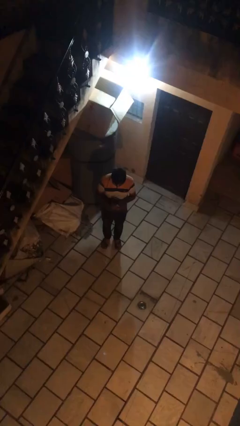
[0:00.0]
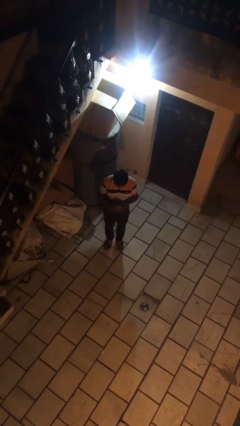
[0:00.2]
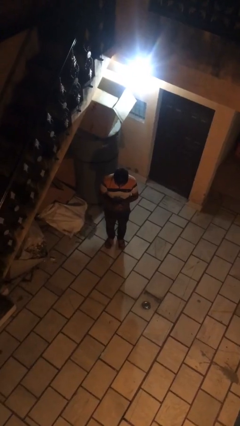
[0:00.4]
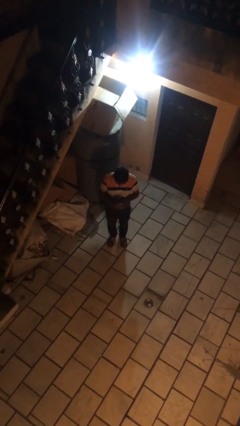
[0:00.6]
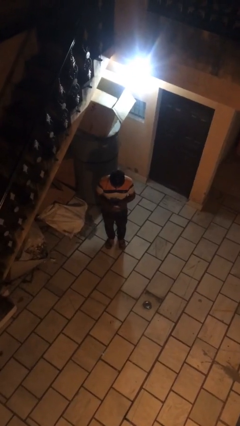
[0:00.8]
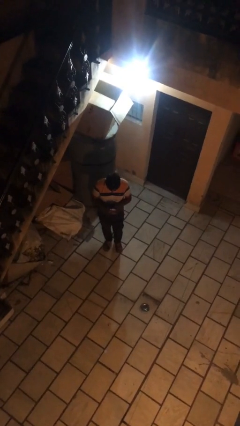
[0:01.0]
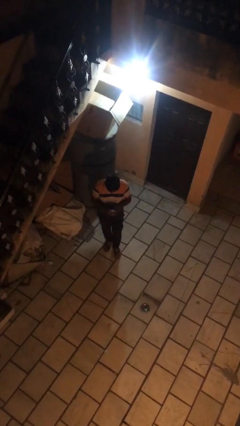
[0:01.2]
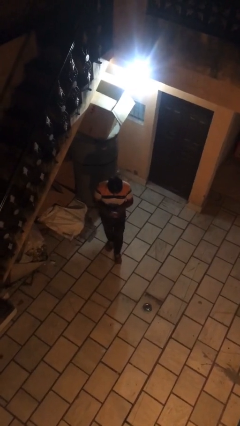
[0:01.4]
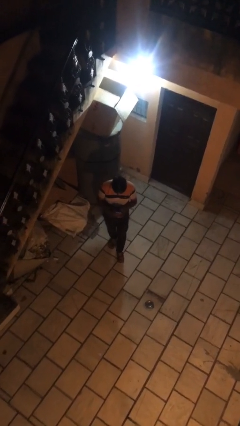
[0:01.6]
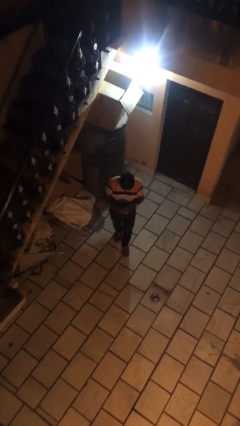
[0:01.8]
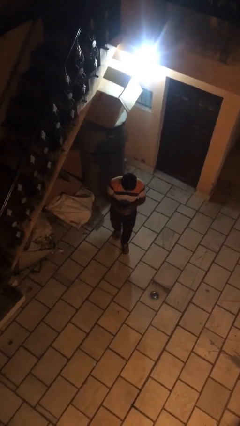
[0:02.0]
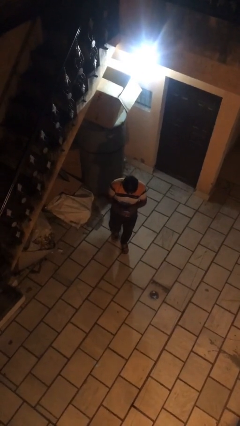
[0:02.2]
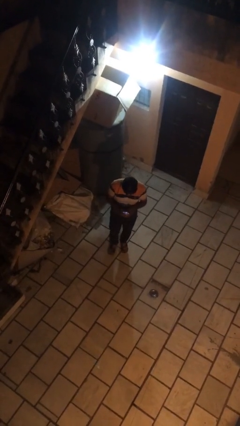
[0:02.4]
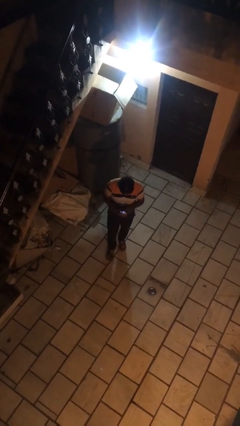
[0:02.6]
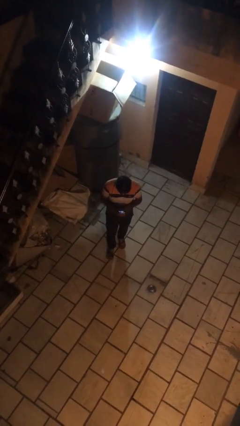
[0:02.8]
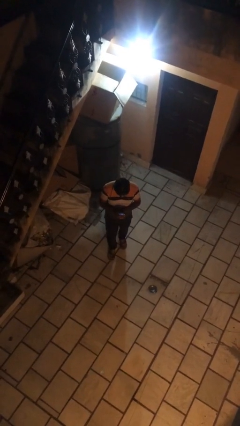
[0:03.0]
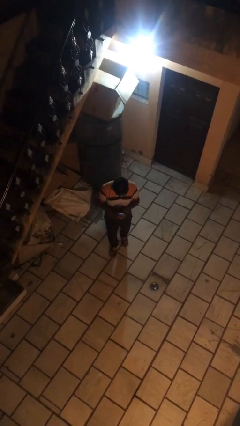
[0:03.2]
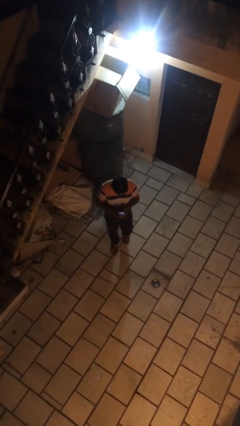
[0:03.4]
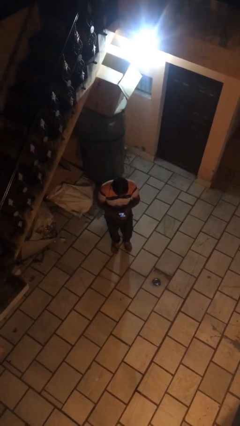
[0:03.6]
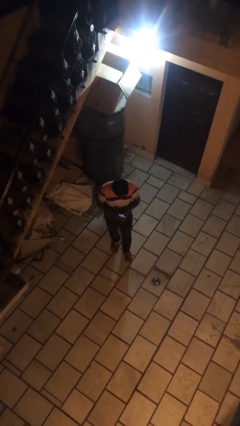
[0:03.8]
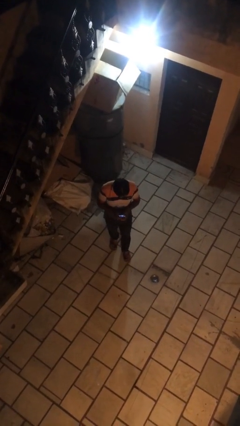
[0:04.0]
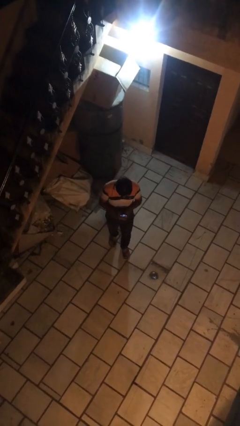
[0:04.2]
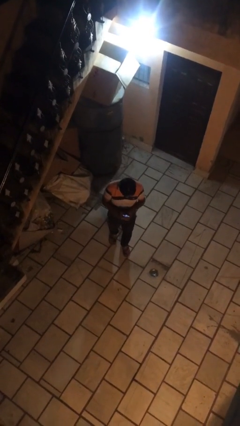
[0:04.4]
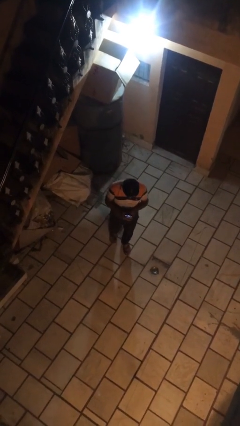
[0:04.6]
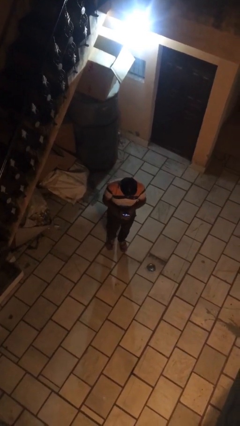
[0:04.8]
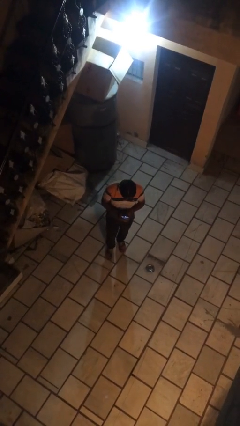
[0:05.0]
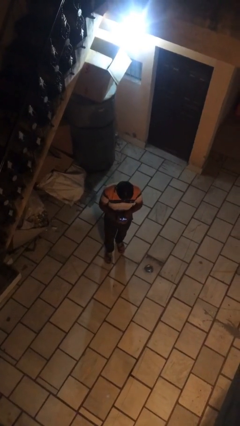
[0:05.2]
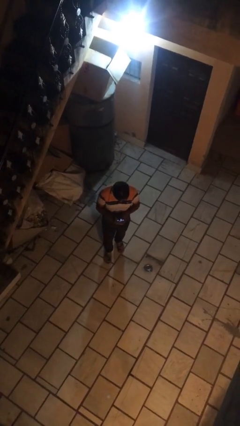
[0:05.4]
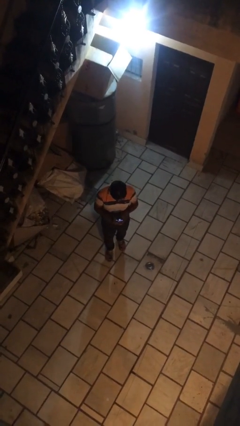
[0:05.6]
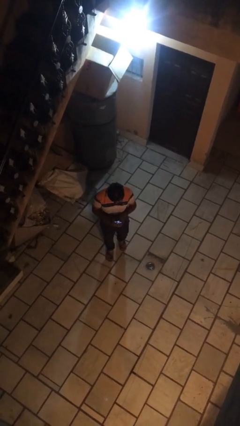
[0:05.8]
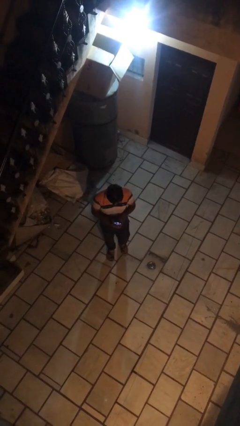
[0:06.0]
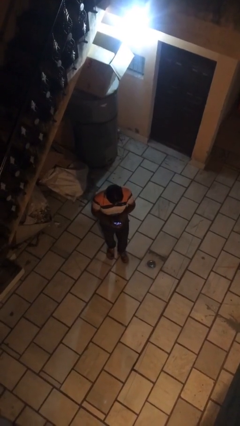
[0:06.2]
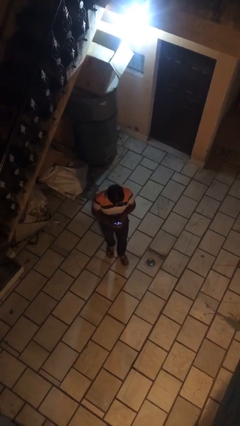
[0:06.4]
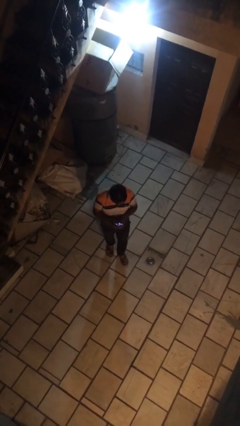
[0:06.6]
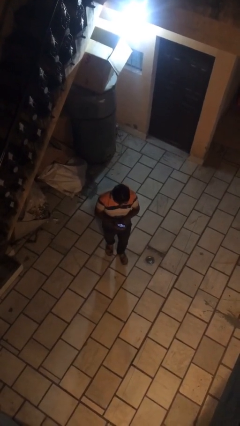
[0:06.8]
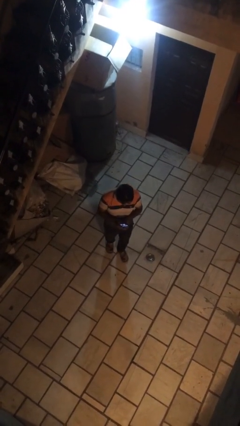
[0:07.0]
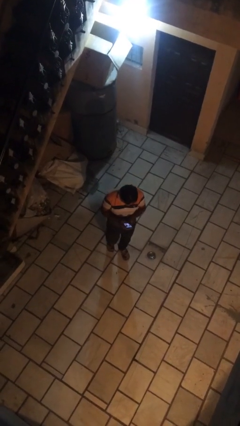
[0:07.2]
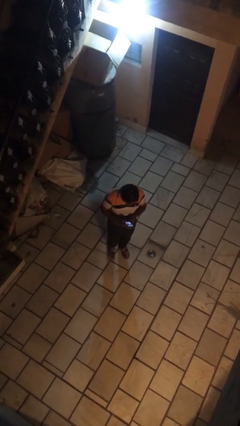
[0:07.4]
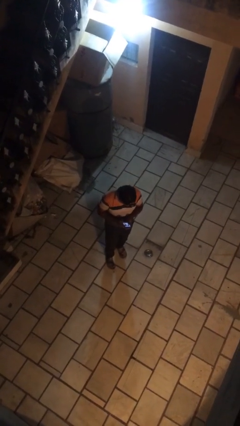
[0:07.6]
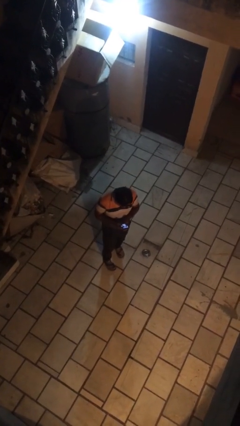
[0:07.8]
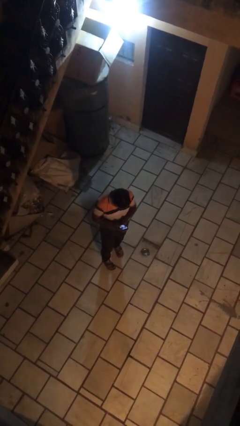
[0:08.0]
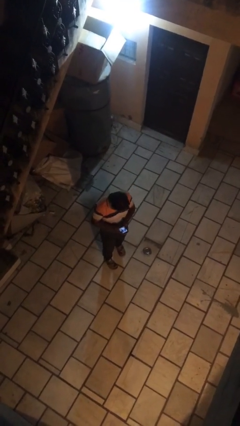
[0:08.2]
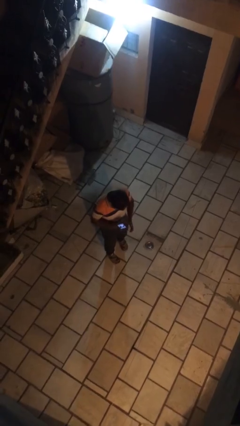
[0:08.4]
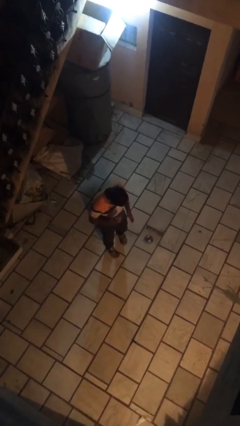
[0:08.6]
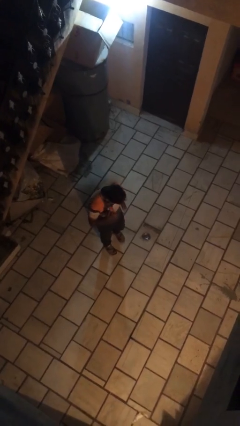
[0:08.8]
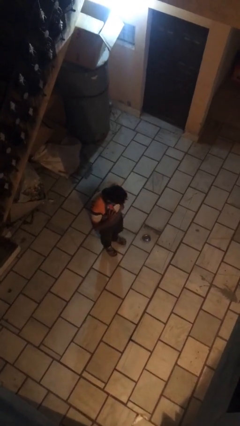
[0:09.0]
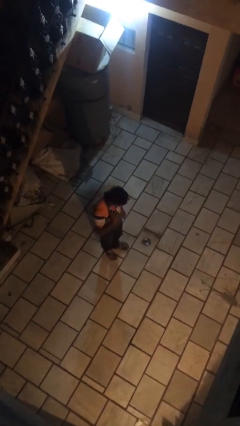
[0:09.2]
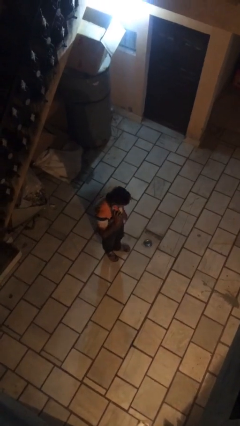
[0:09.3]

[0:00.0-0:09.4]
person texts on phone

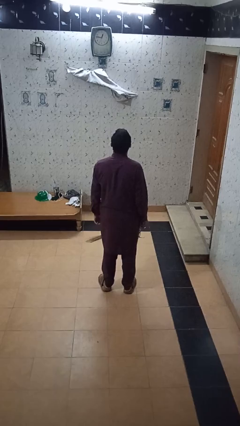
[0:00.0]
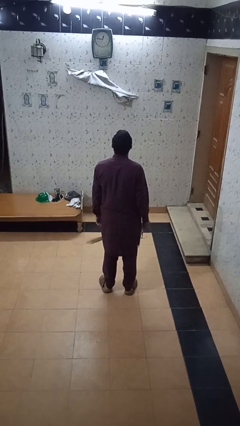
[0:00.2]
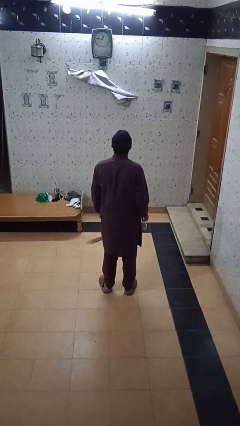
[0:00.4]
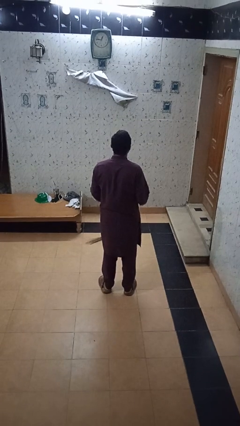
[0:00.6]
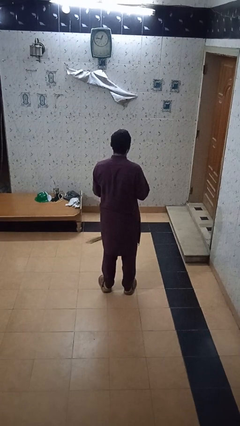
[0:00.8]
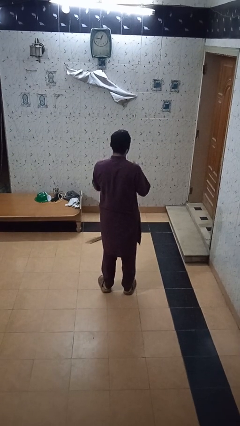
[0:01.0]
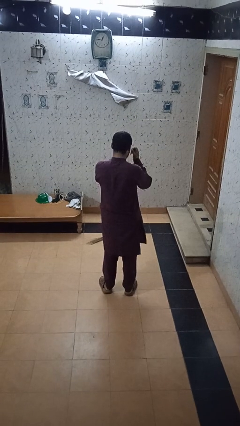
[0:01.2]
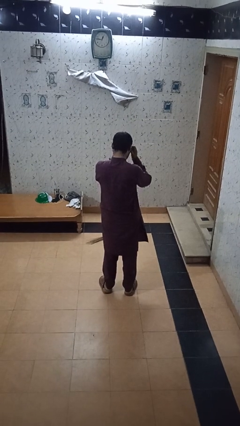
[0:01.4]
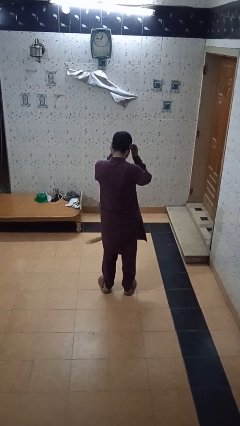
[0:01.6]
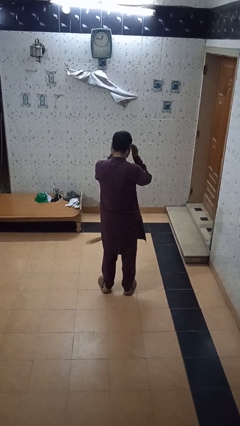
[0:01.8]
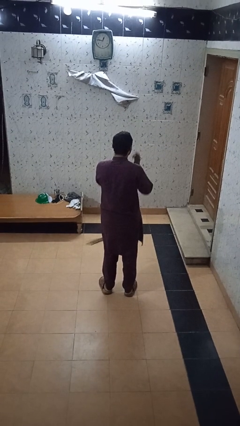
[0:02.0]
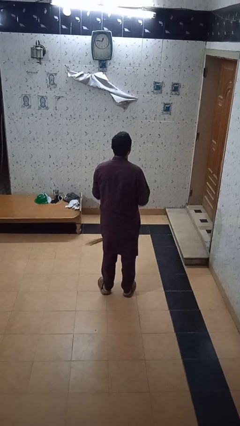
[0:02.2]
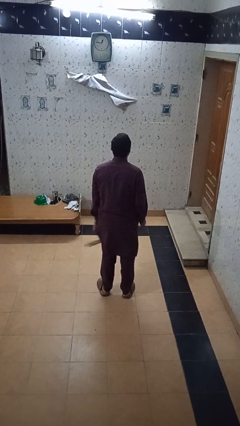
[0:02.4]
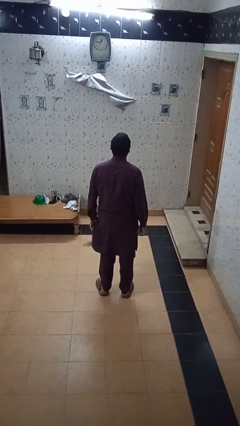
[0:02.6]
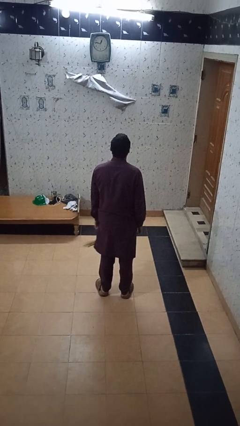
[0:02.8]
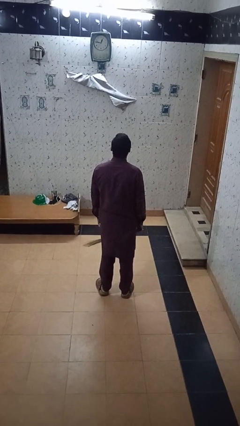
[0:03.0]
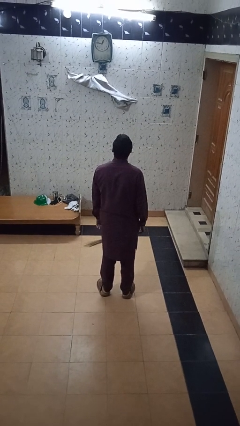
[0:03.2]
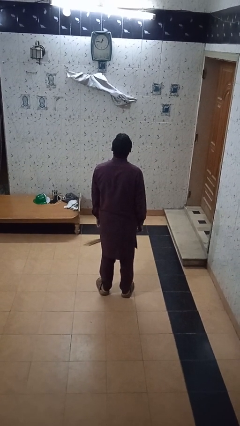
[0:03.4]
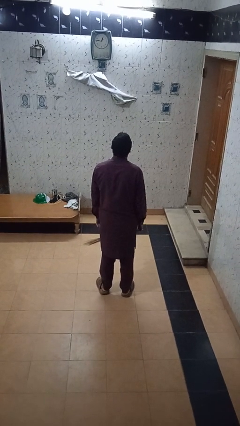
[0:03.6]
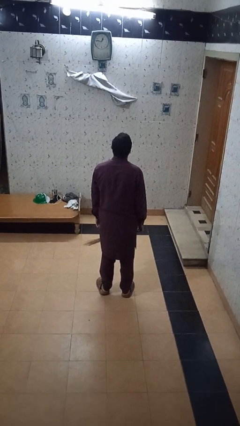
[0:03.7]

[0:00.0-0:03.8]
person puts on glasses

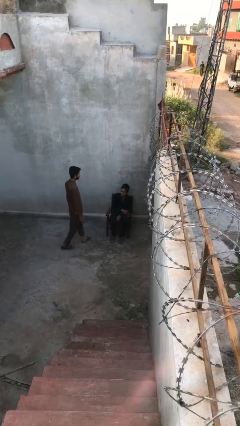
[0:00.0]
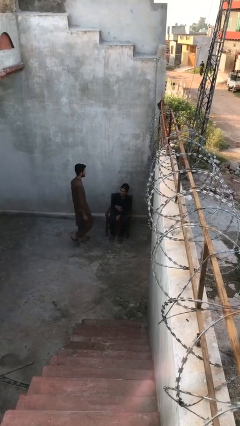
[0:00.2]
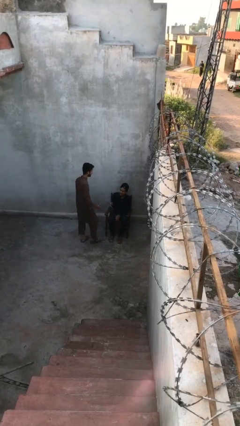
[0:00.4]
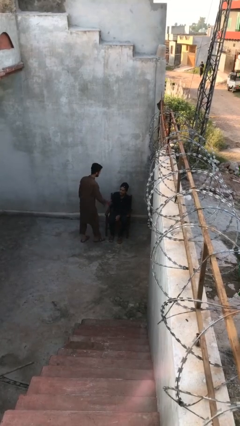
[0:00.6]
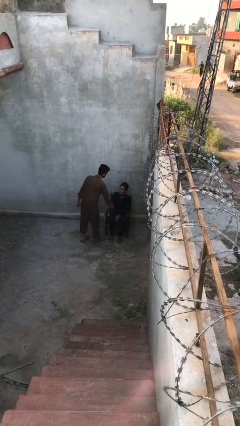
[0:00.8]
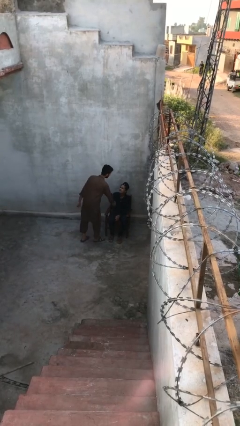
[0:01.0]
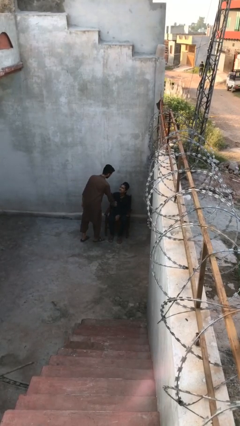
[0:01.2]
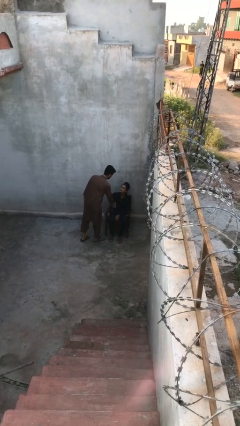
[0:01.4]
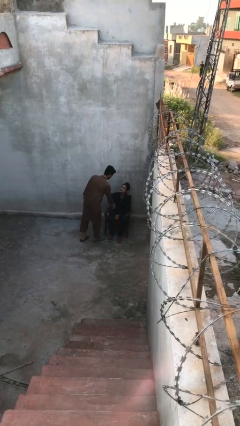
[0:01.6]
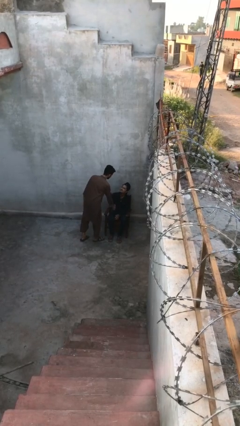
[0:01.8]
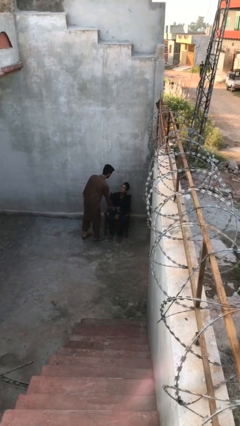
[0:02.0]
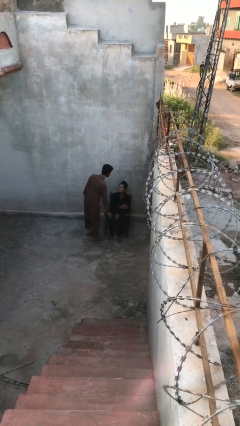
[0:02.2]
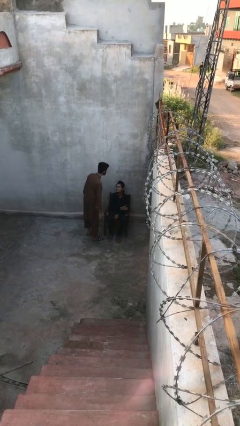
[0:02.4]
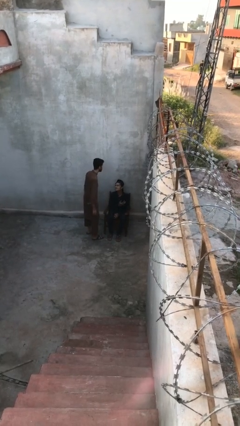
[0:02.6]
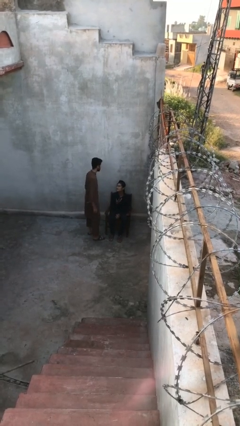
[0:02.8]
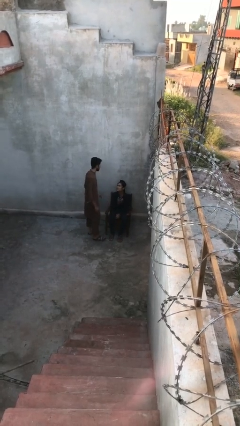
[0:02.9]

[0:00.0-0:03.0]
person shakes hand

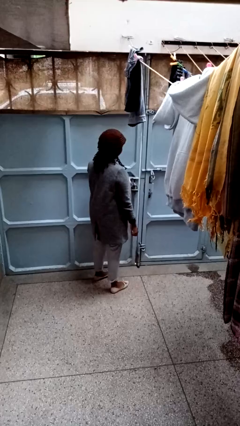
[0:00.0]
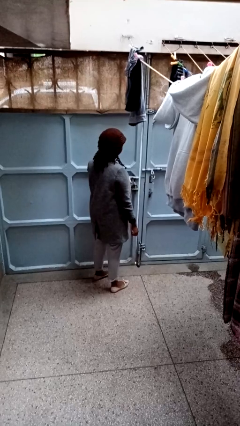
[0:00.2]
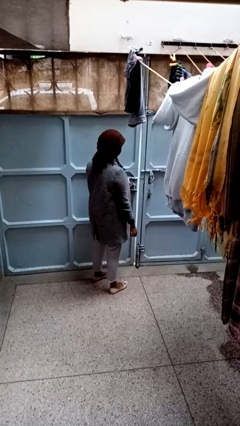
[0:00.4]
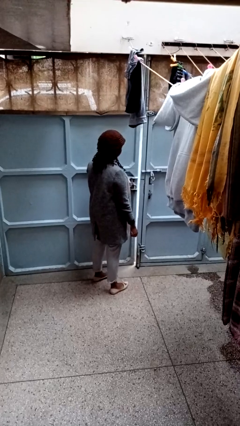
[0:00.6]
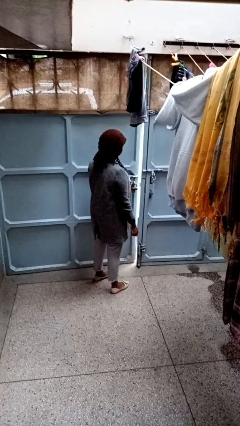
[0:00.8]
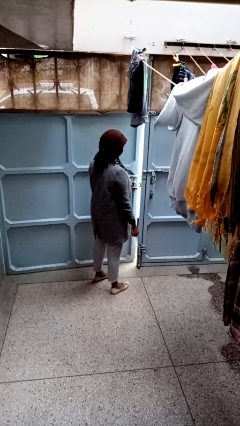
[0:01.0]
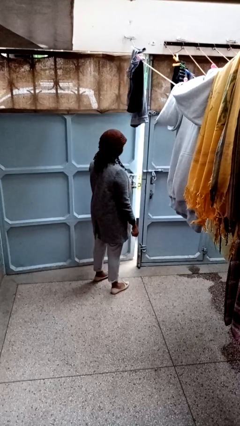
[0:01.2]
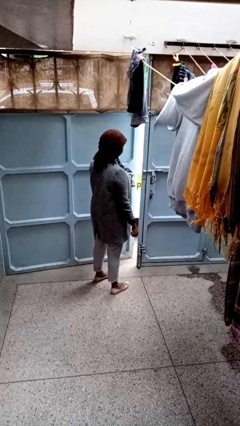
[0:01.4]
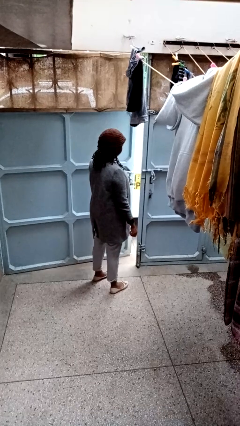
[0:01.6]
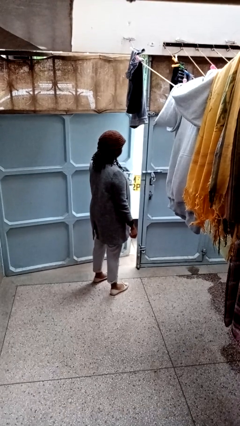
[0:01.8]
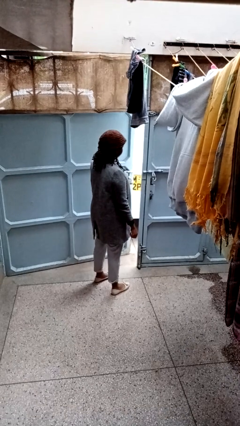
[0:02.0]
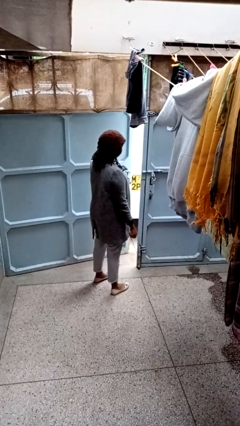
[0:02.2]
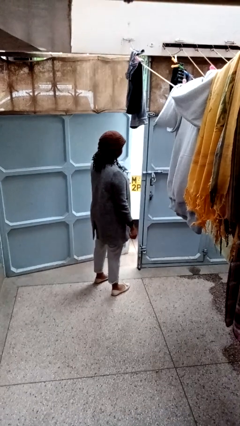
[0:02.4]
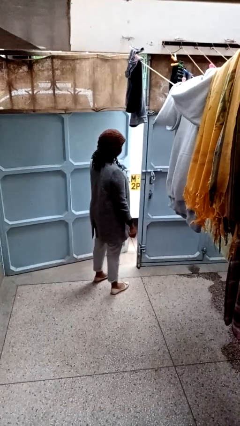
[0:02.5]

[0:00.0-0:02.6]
person opens gate
